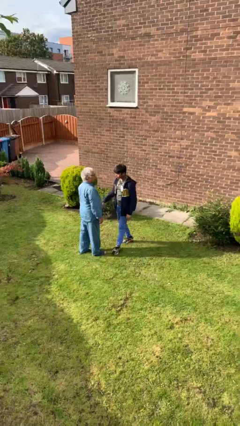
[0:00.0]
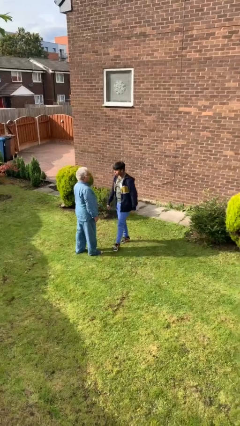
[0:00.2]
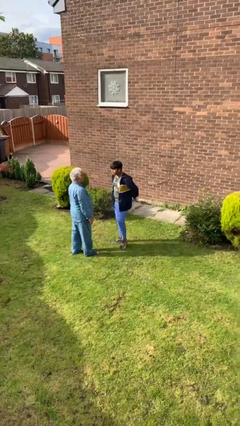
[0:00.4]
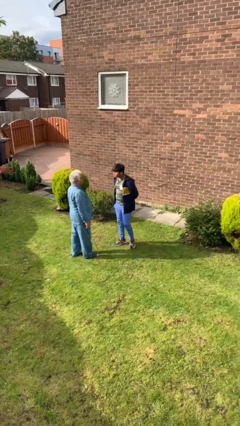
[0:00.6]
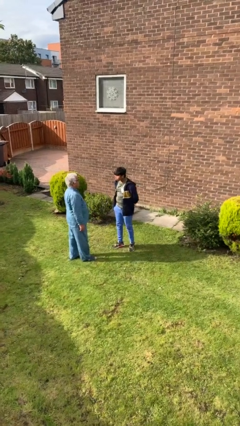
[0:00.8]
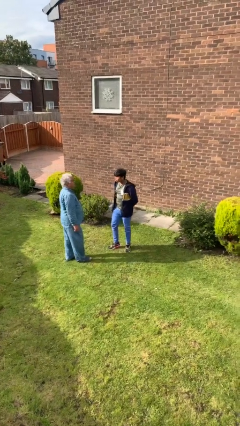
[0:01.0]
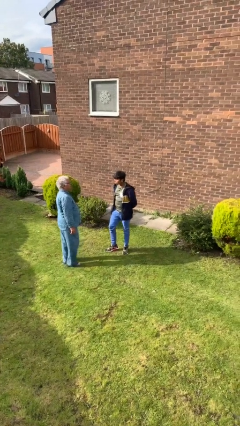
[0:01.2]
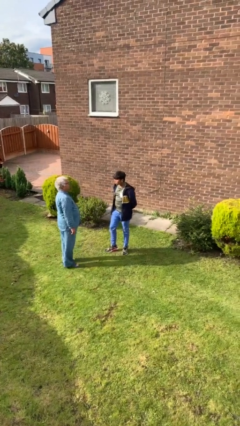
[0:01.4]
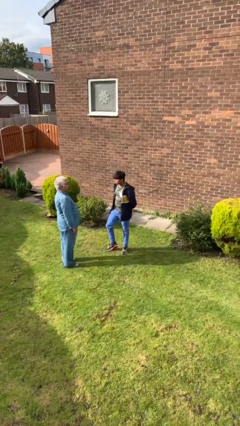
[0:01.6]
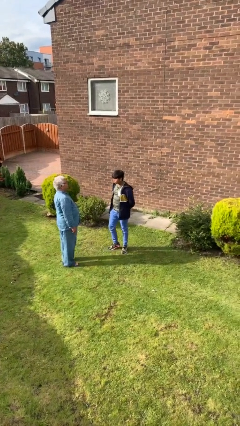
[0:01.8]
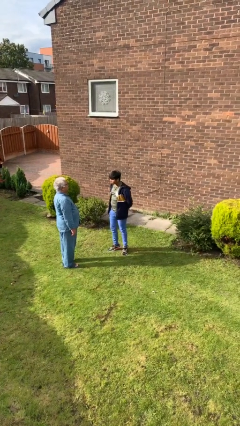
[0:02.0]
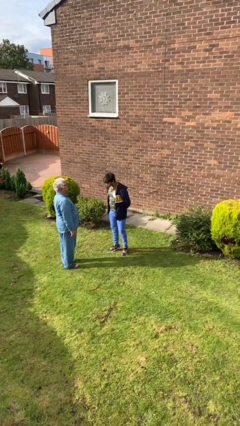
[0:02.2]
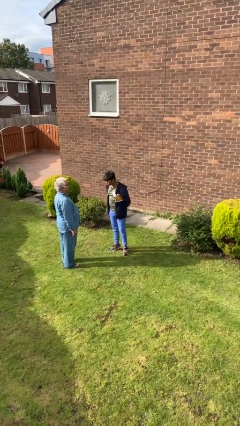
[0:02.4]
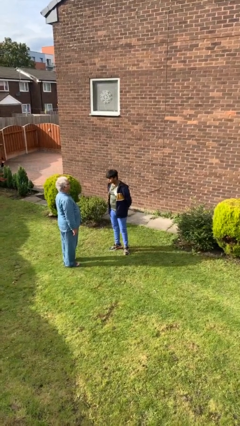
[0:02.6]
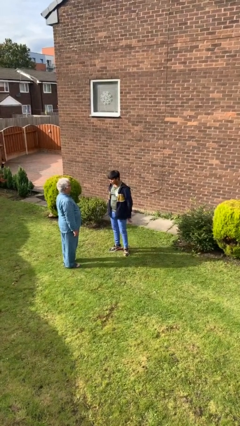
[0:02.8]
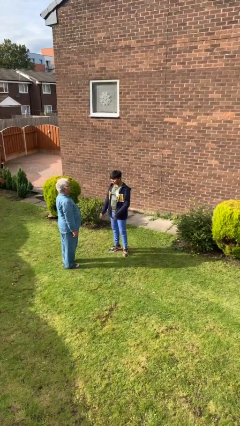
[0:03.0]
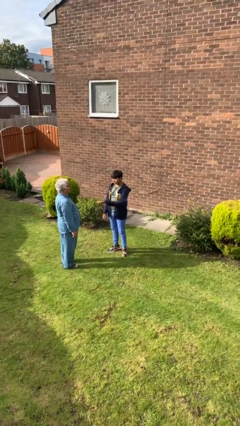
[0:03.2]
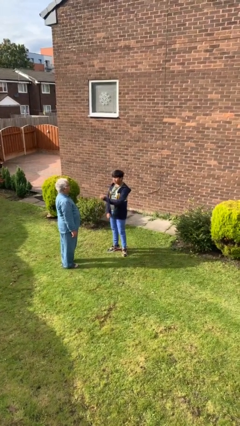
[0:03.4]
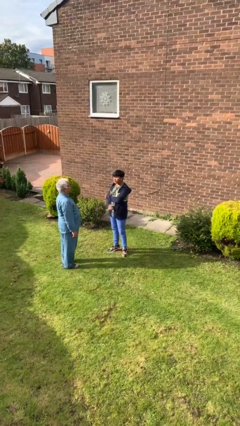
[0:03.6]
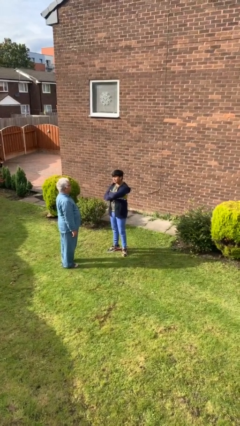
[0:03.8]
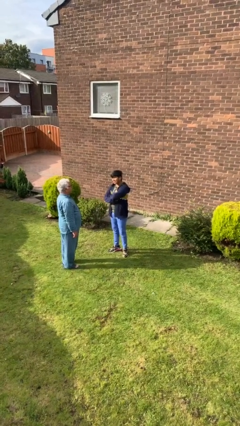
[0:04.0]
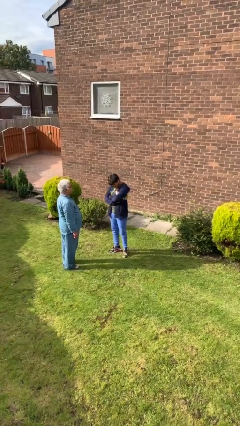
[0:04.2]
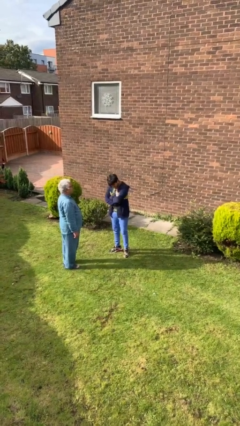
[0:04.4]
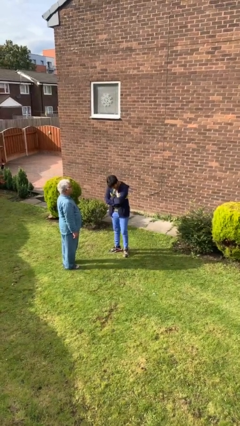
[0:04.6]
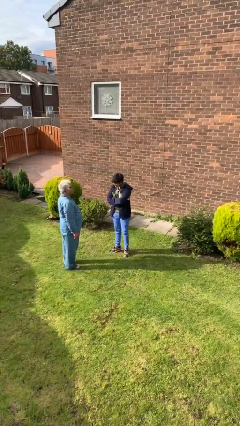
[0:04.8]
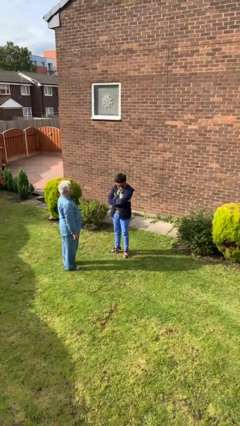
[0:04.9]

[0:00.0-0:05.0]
person talks to person

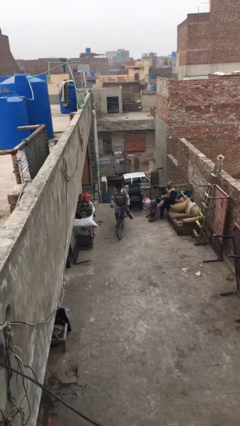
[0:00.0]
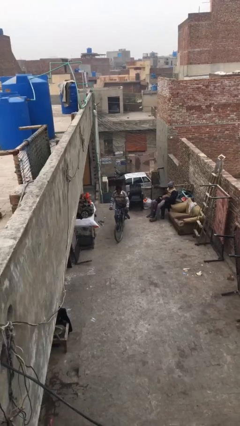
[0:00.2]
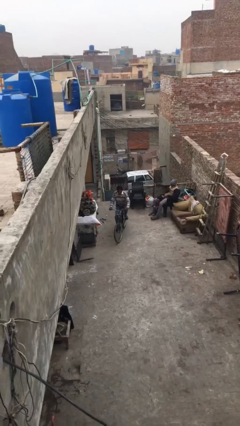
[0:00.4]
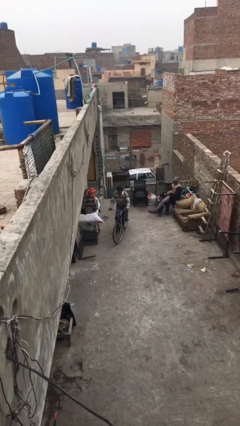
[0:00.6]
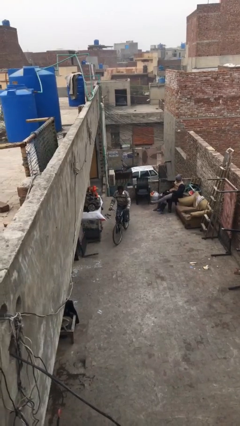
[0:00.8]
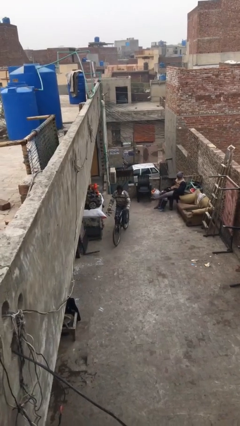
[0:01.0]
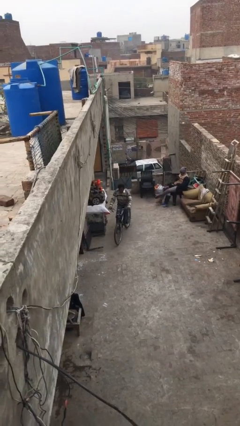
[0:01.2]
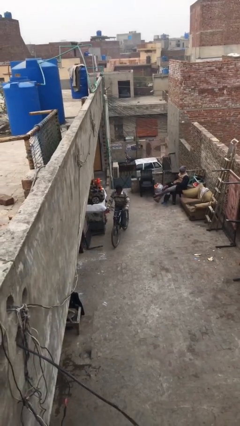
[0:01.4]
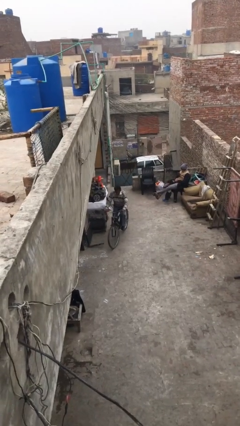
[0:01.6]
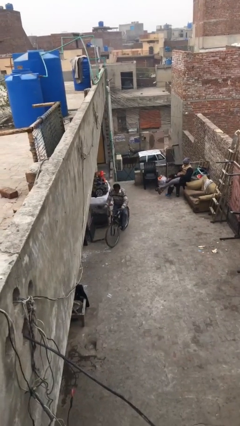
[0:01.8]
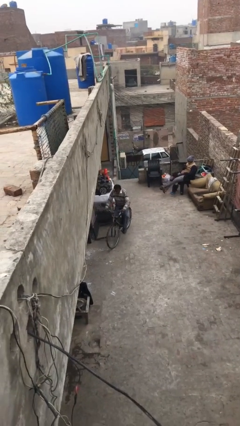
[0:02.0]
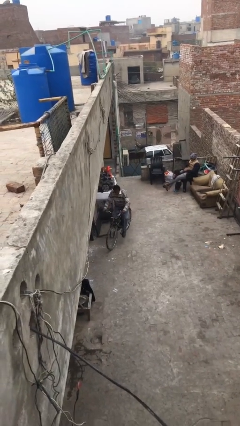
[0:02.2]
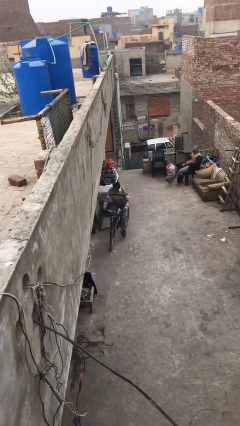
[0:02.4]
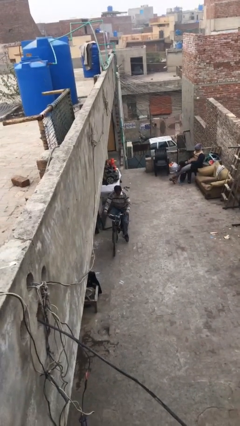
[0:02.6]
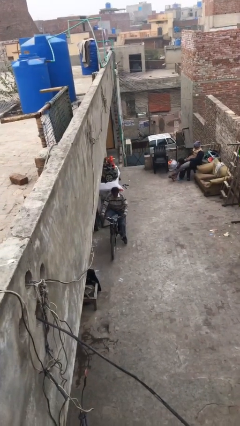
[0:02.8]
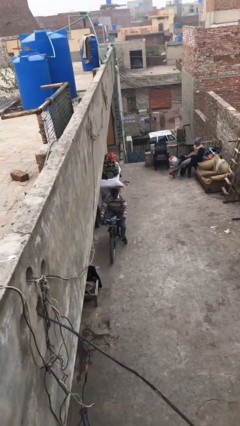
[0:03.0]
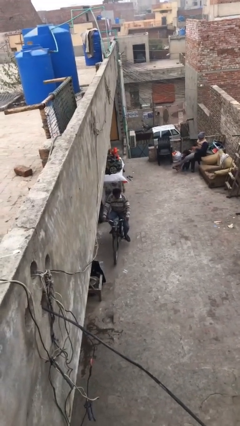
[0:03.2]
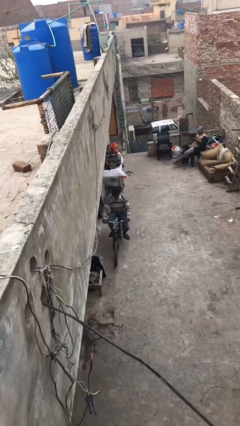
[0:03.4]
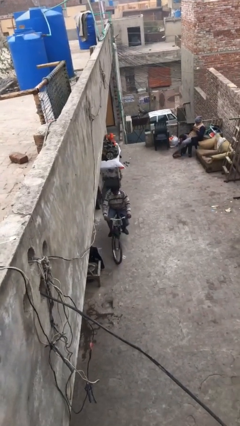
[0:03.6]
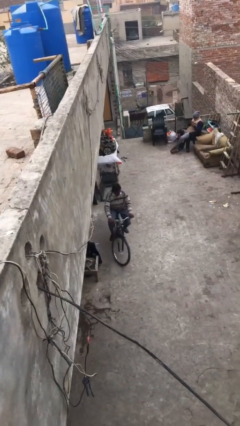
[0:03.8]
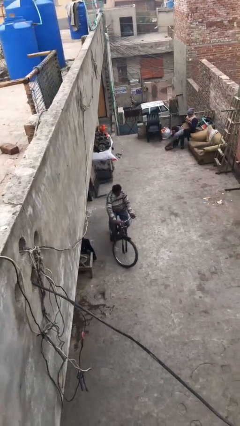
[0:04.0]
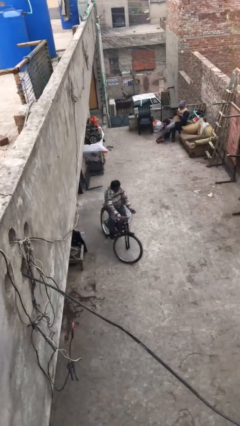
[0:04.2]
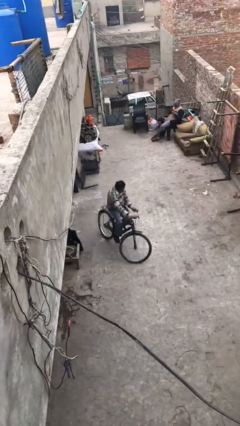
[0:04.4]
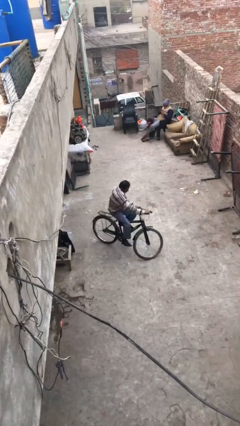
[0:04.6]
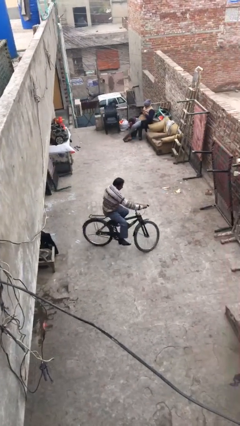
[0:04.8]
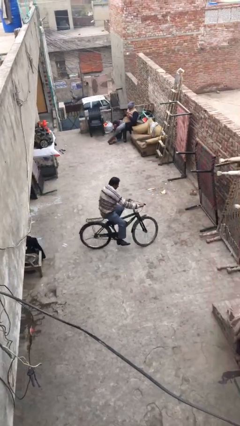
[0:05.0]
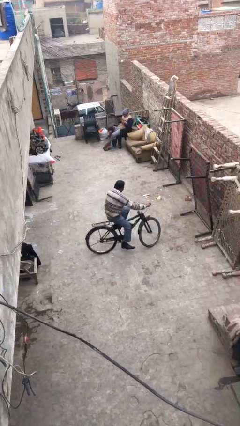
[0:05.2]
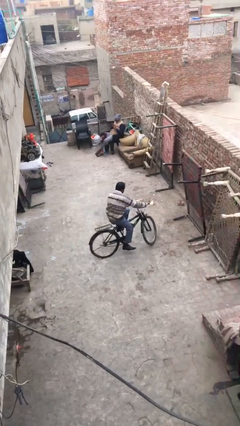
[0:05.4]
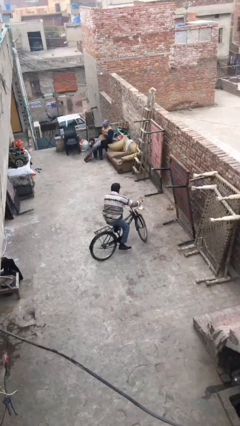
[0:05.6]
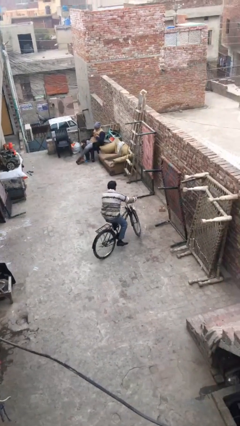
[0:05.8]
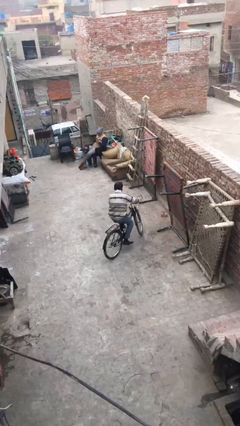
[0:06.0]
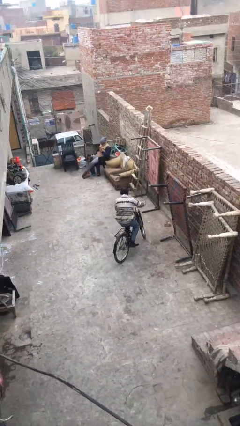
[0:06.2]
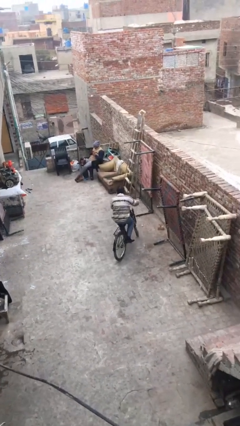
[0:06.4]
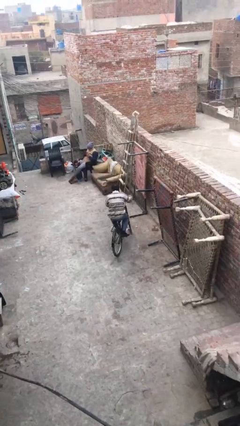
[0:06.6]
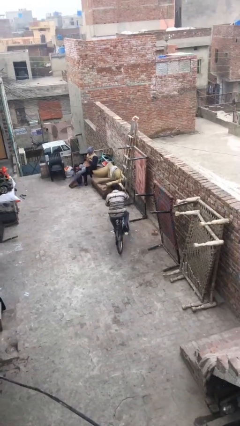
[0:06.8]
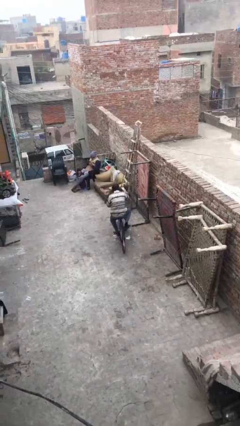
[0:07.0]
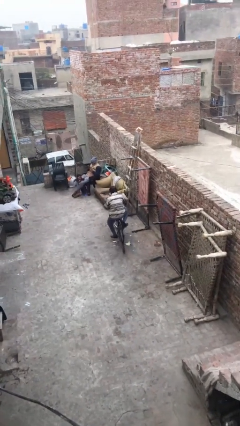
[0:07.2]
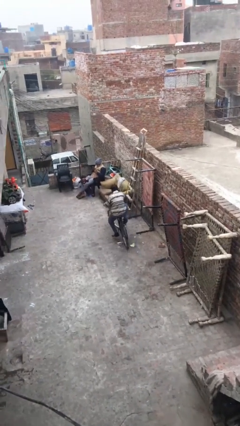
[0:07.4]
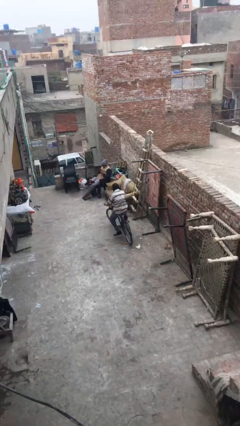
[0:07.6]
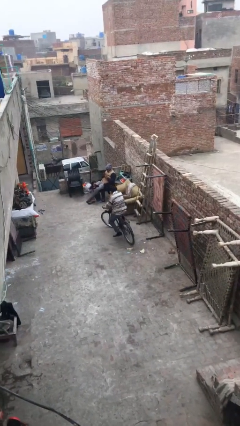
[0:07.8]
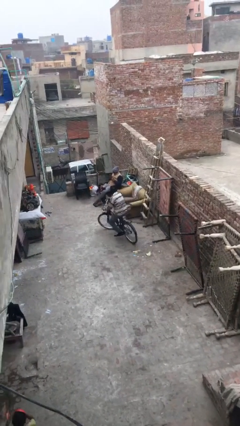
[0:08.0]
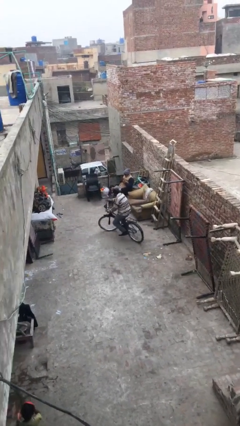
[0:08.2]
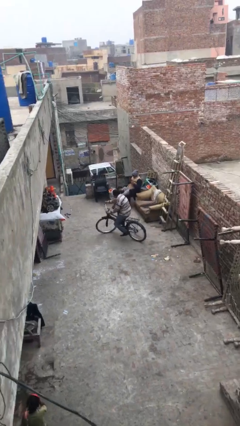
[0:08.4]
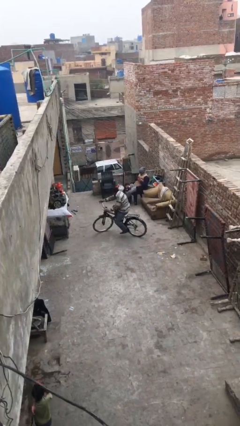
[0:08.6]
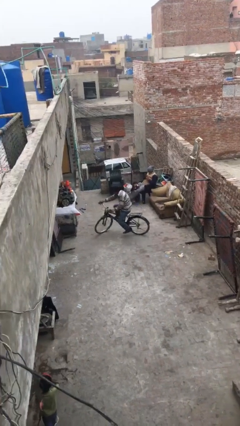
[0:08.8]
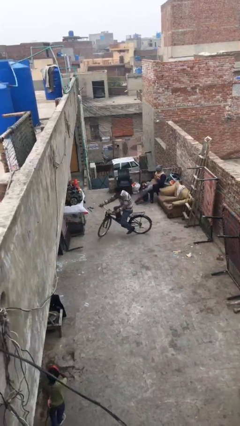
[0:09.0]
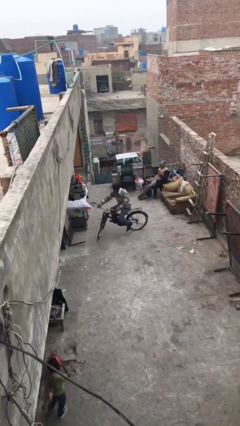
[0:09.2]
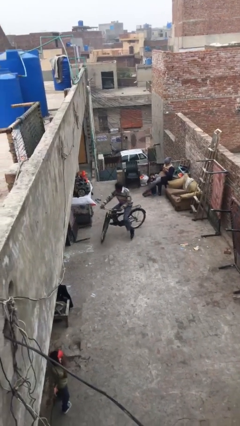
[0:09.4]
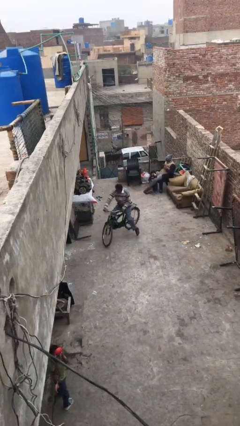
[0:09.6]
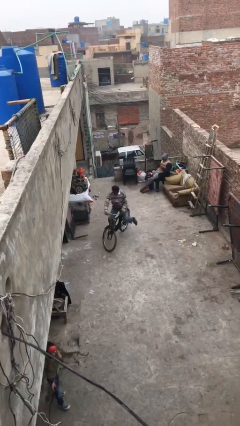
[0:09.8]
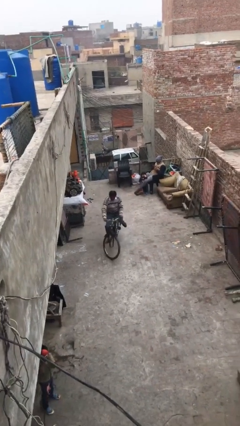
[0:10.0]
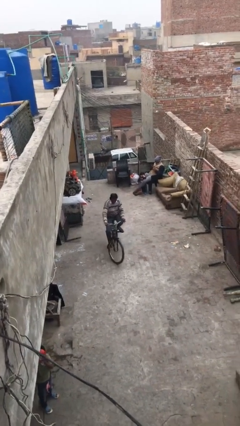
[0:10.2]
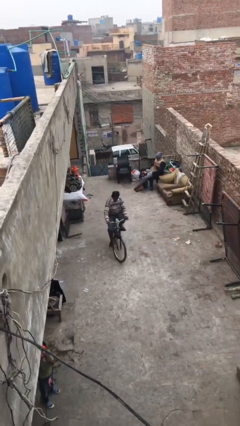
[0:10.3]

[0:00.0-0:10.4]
person rides bicycle

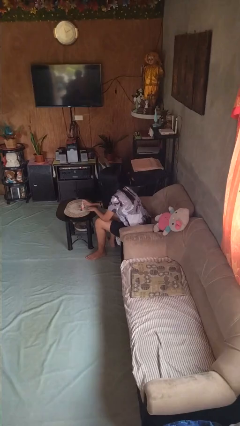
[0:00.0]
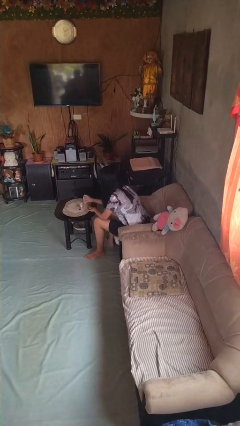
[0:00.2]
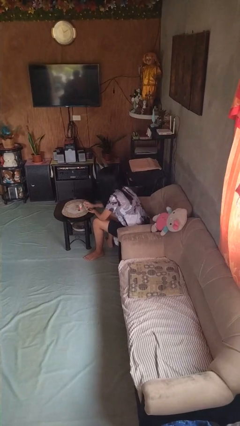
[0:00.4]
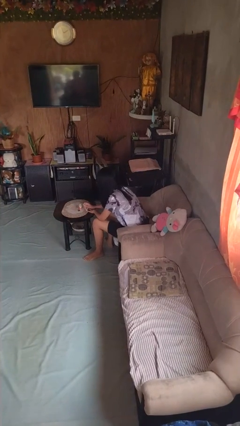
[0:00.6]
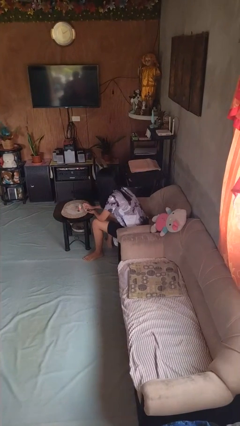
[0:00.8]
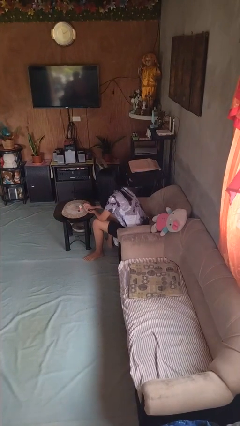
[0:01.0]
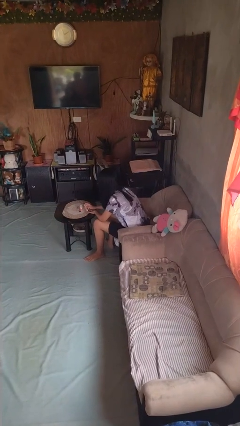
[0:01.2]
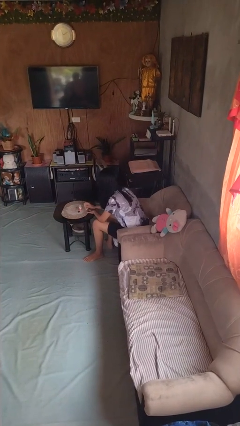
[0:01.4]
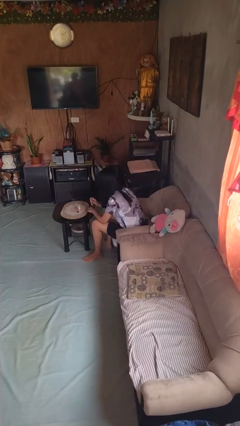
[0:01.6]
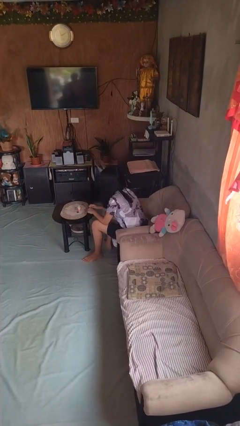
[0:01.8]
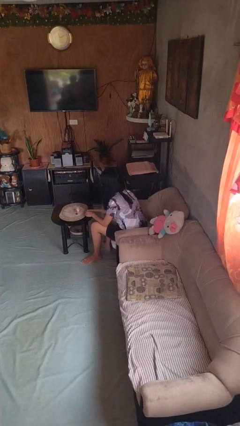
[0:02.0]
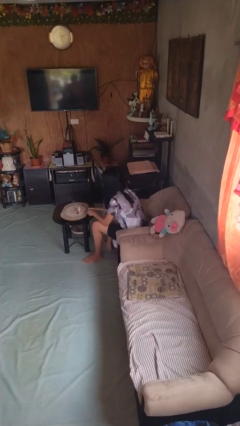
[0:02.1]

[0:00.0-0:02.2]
person paints fingernails

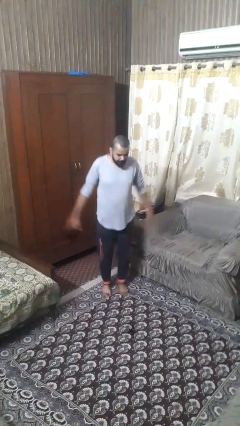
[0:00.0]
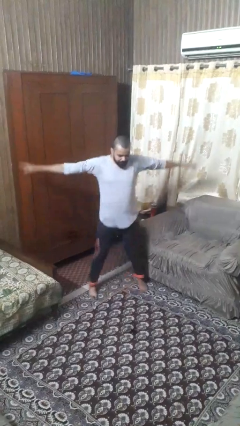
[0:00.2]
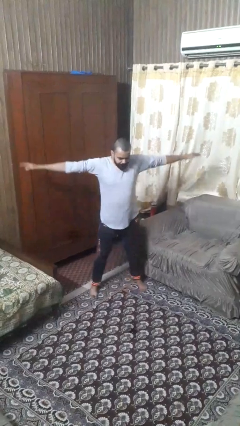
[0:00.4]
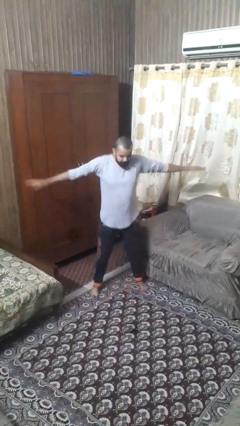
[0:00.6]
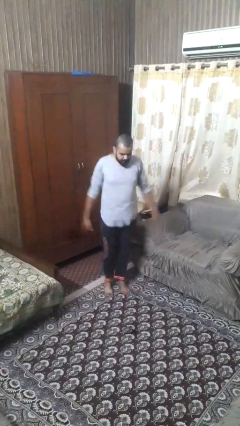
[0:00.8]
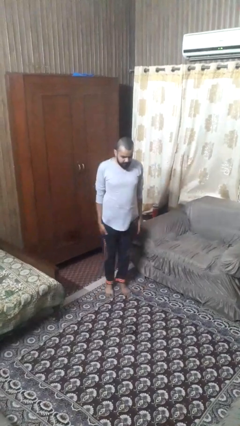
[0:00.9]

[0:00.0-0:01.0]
person exercises with jumping jacks
